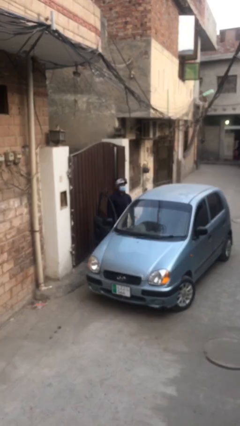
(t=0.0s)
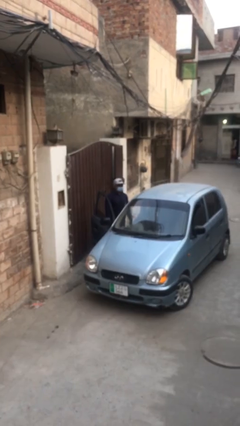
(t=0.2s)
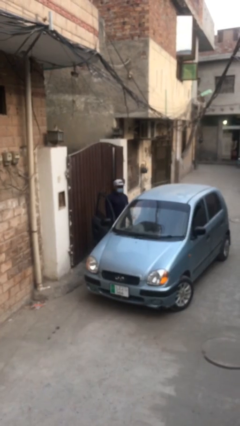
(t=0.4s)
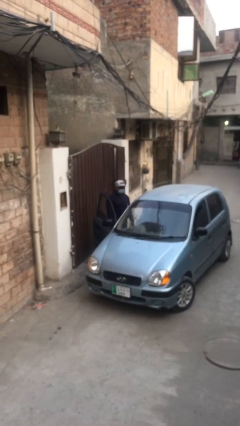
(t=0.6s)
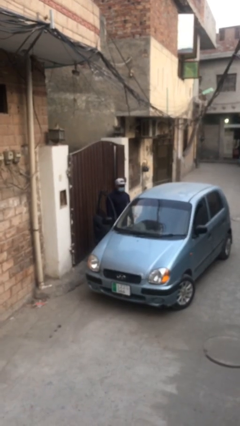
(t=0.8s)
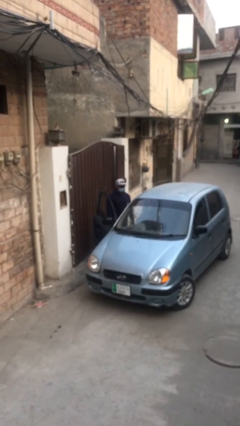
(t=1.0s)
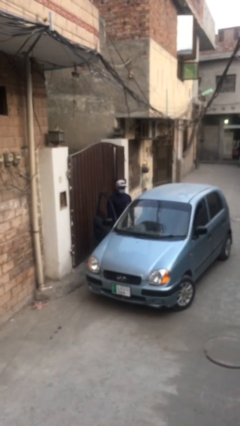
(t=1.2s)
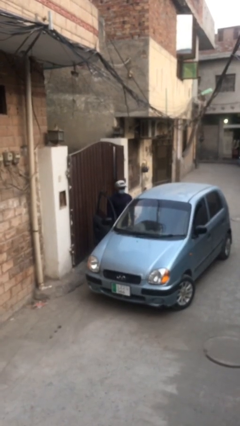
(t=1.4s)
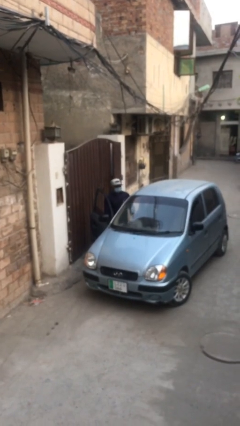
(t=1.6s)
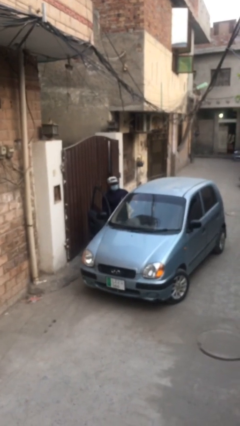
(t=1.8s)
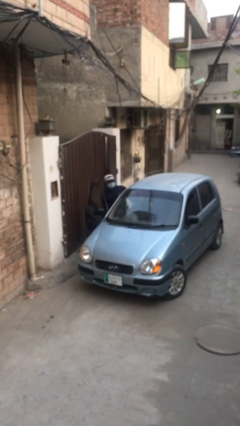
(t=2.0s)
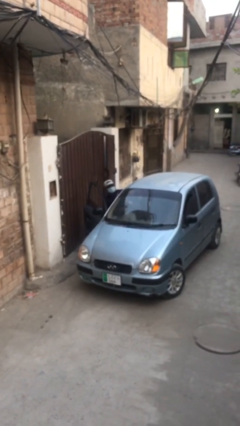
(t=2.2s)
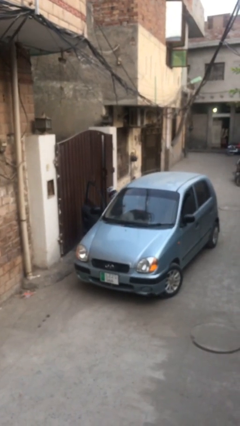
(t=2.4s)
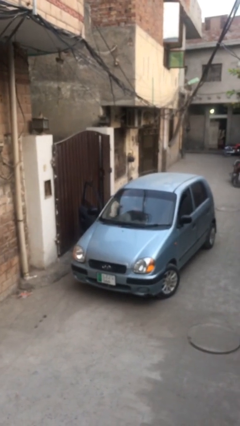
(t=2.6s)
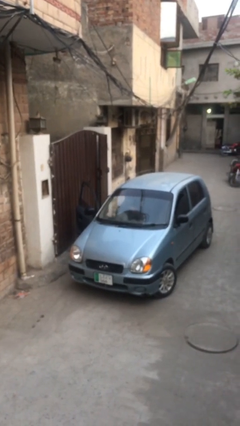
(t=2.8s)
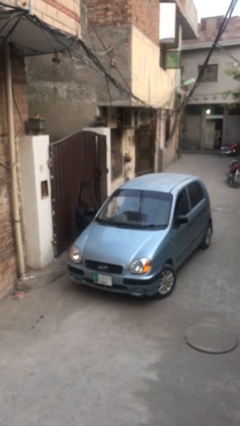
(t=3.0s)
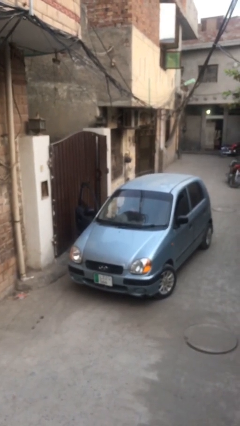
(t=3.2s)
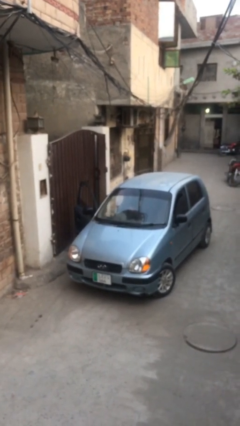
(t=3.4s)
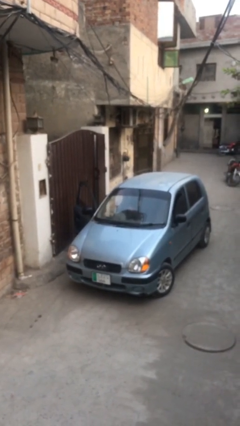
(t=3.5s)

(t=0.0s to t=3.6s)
person enters car

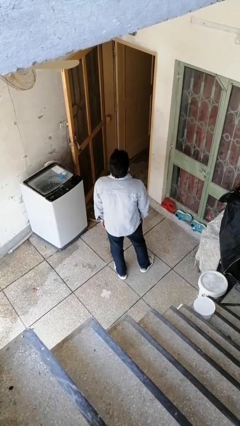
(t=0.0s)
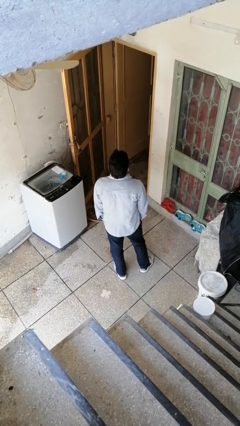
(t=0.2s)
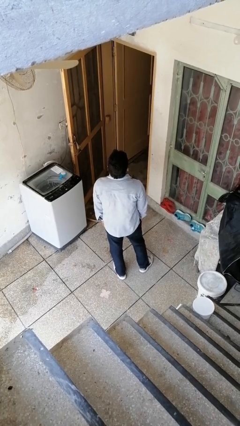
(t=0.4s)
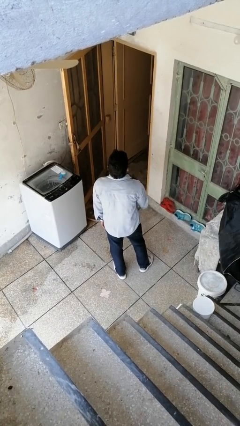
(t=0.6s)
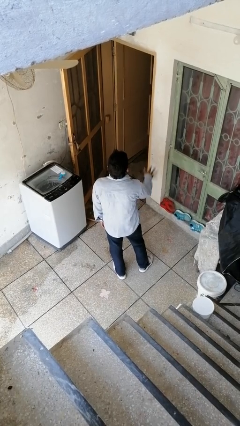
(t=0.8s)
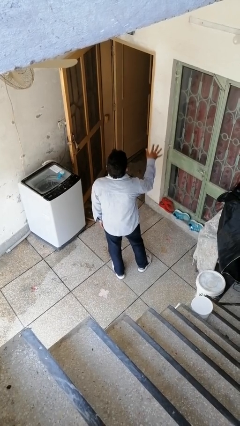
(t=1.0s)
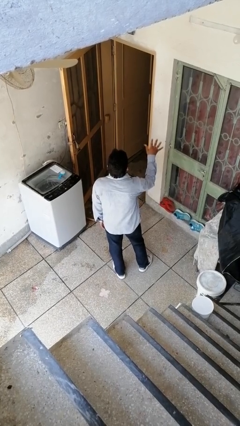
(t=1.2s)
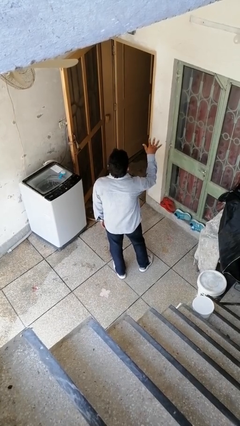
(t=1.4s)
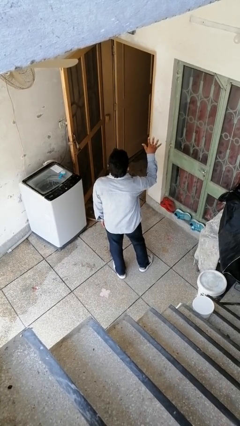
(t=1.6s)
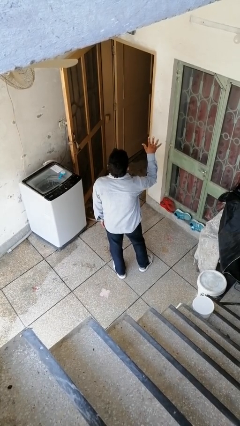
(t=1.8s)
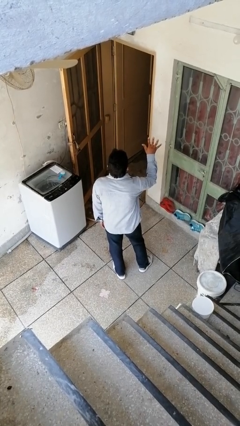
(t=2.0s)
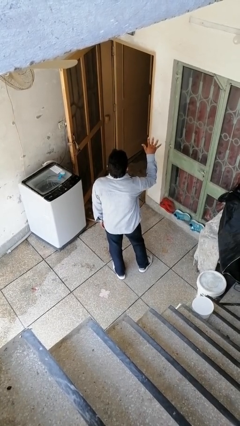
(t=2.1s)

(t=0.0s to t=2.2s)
person gestures number five

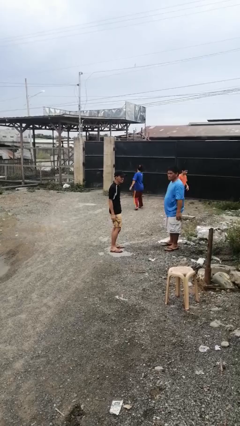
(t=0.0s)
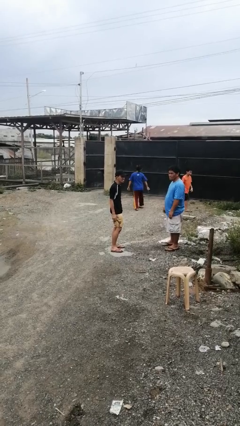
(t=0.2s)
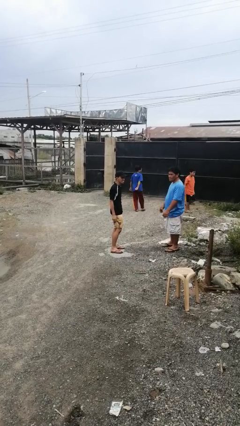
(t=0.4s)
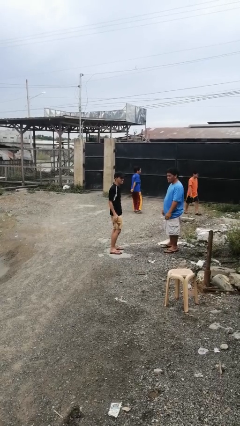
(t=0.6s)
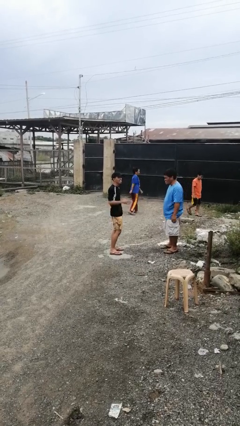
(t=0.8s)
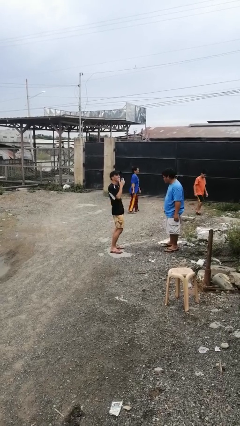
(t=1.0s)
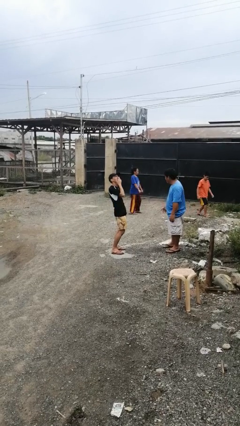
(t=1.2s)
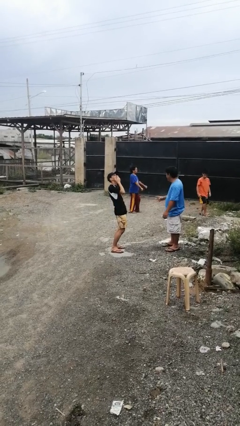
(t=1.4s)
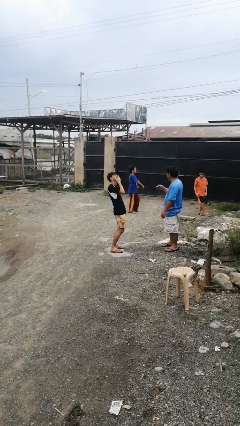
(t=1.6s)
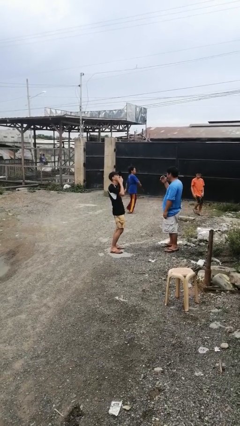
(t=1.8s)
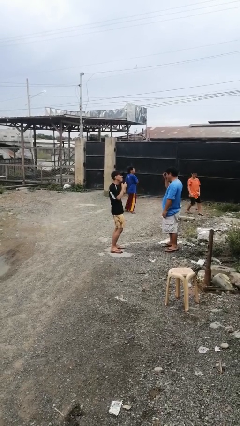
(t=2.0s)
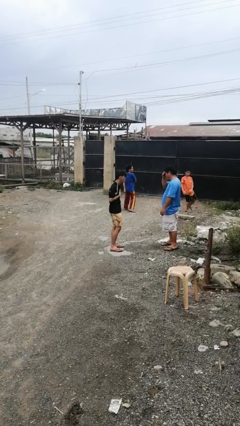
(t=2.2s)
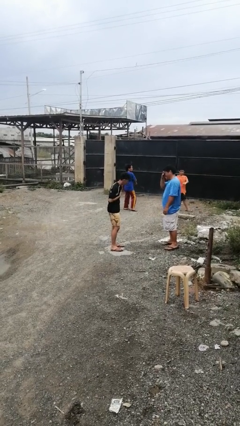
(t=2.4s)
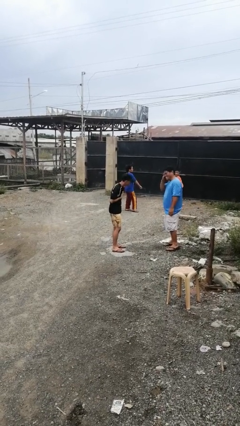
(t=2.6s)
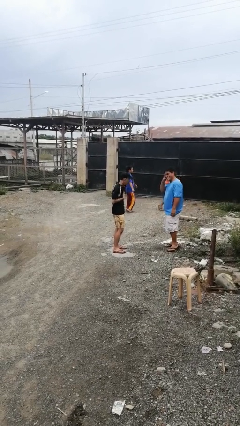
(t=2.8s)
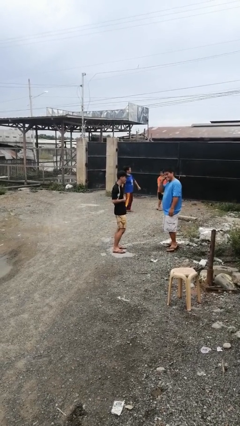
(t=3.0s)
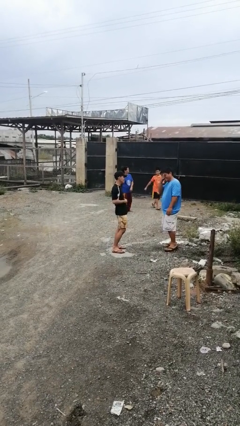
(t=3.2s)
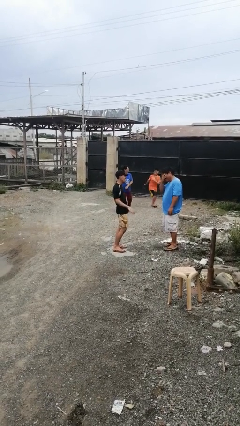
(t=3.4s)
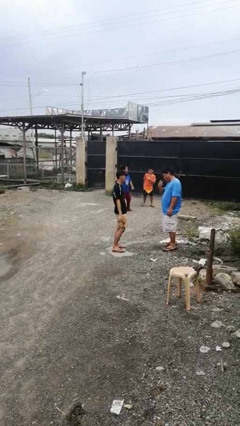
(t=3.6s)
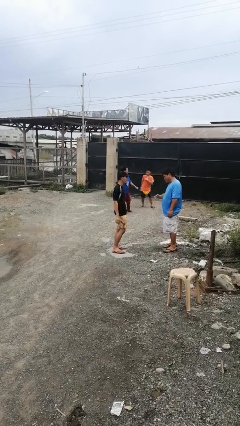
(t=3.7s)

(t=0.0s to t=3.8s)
person laughs with person

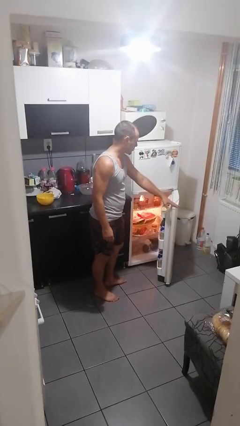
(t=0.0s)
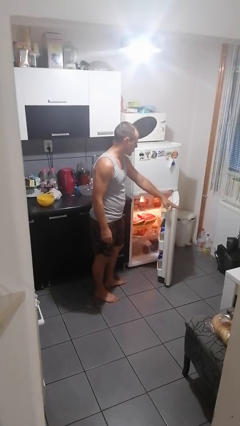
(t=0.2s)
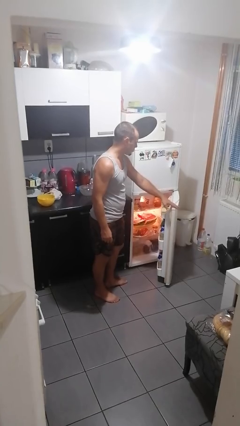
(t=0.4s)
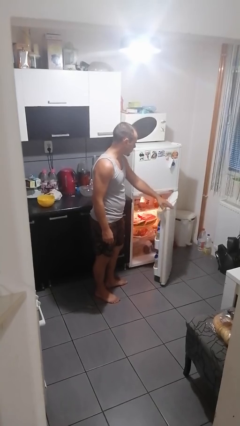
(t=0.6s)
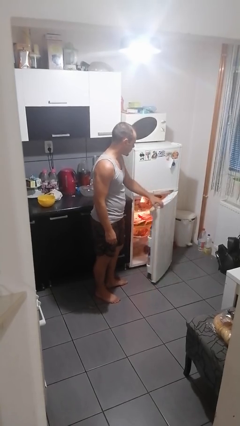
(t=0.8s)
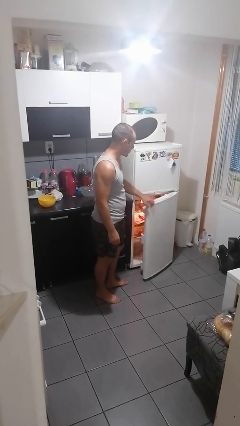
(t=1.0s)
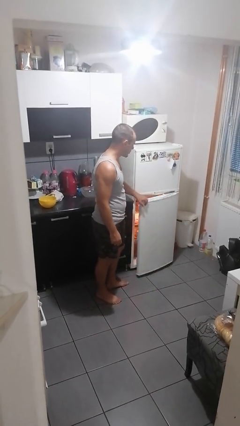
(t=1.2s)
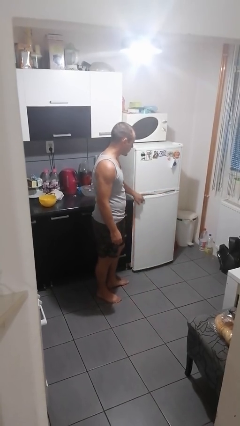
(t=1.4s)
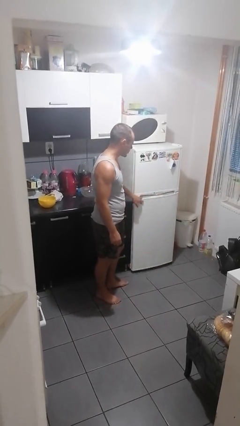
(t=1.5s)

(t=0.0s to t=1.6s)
person closes refrigerator

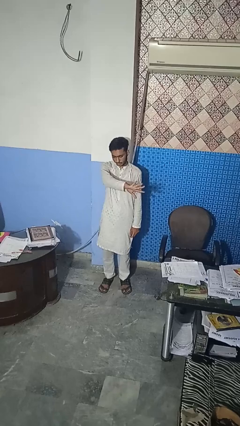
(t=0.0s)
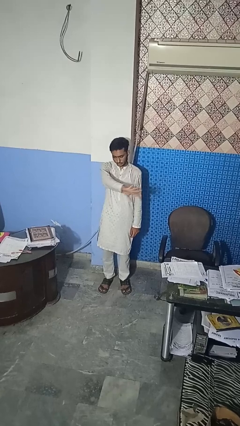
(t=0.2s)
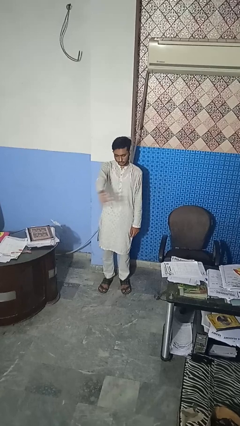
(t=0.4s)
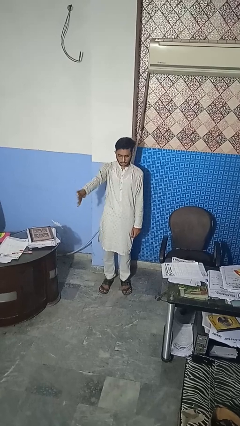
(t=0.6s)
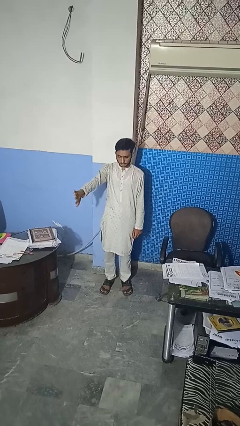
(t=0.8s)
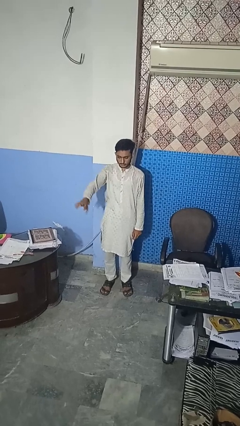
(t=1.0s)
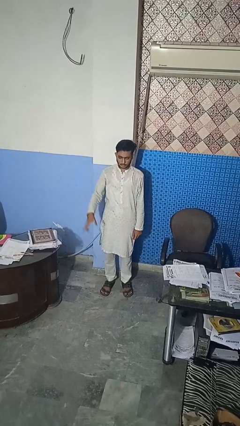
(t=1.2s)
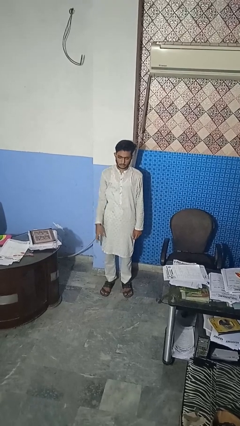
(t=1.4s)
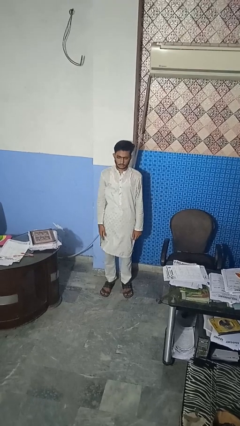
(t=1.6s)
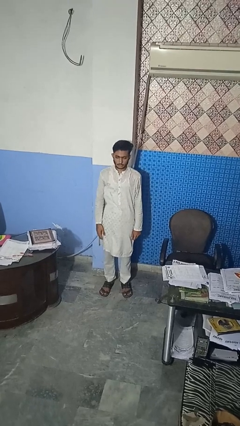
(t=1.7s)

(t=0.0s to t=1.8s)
person gestures swipe right

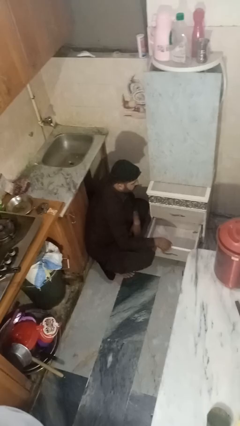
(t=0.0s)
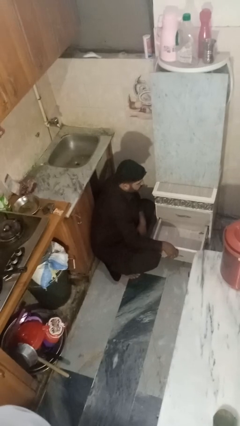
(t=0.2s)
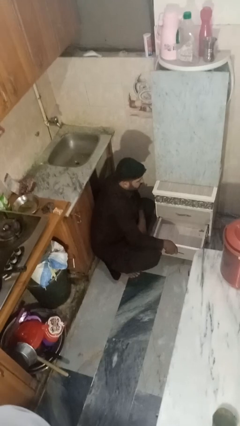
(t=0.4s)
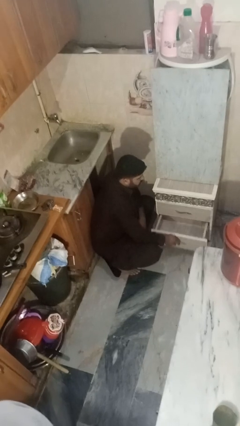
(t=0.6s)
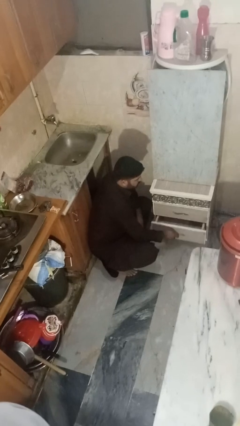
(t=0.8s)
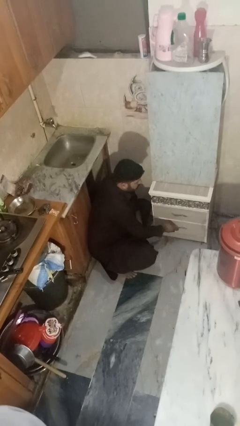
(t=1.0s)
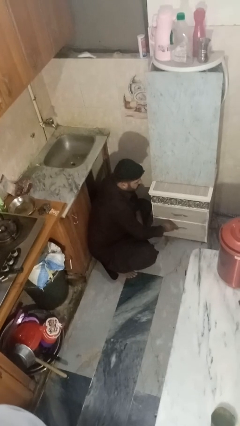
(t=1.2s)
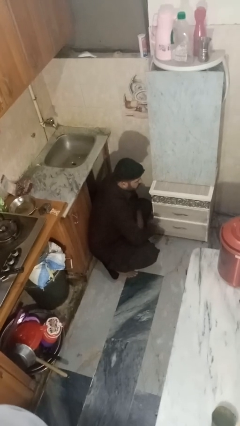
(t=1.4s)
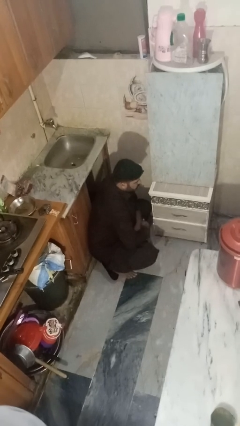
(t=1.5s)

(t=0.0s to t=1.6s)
person closes kitchen drawer

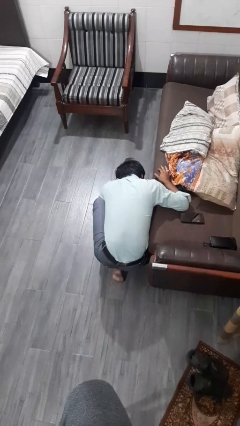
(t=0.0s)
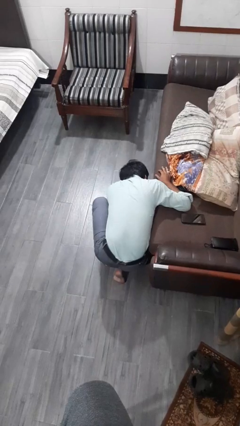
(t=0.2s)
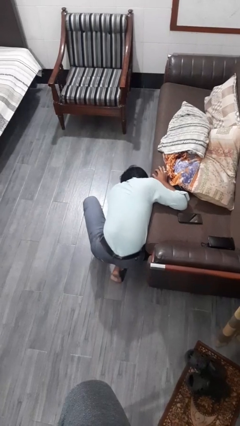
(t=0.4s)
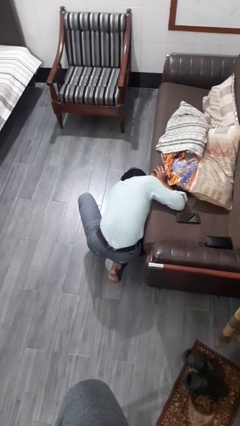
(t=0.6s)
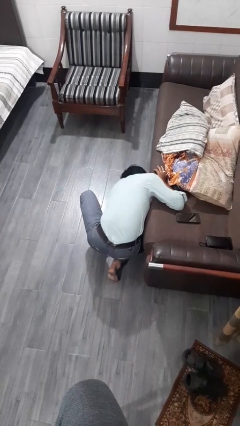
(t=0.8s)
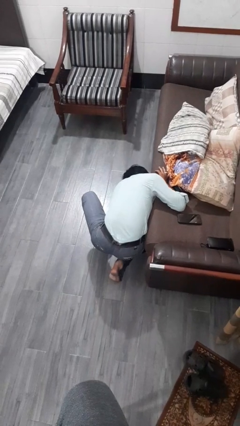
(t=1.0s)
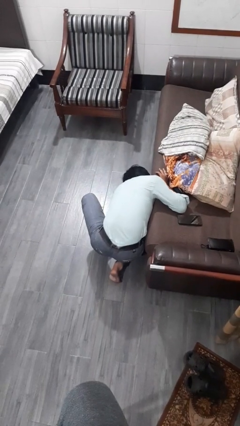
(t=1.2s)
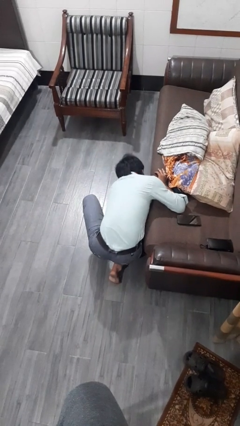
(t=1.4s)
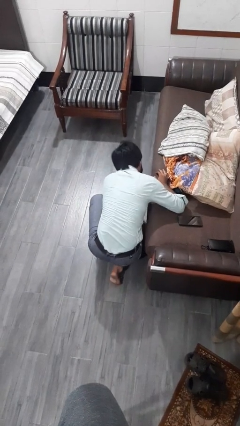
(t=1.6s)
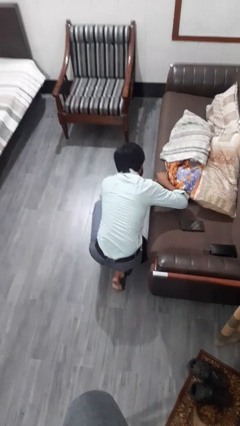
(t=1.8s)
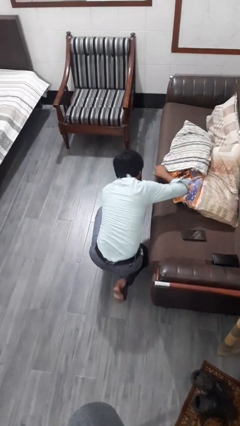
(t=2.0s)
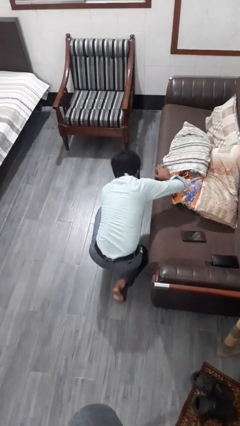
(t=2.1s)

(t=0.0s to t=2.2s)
person searches under couch

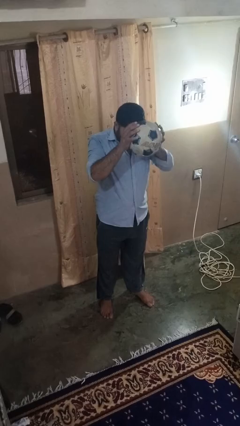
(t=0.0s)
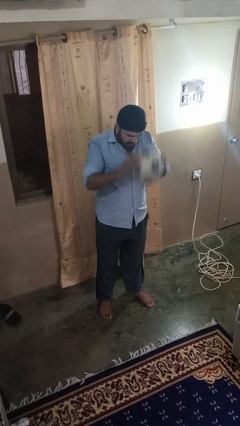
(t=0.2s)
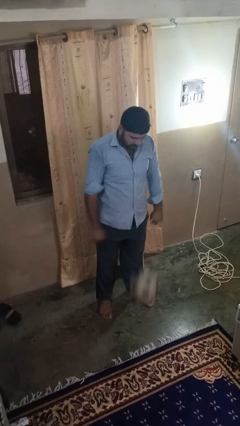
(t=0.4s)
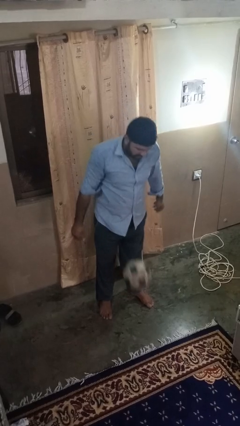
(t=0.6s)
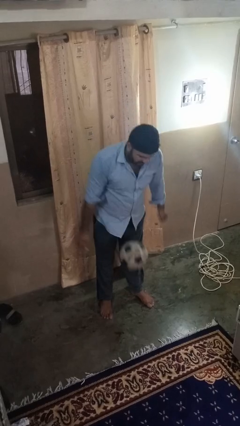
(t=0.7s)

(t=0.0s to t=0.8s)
person bounces ball on floor
